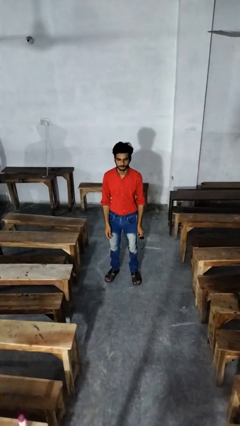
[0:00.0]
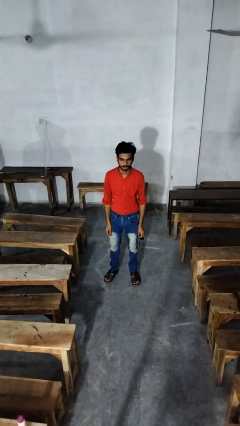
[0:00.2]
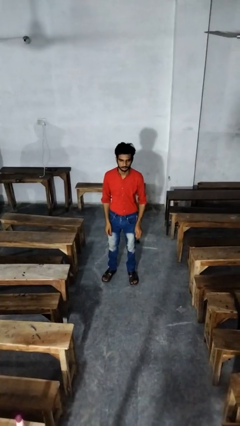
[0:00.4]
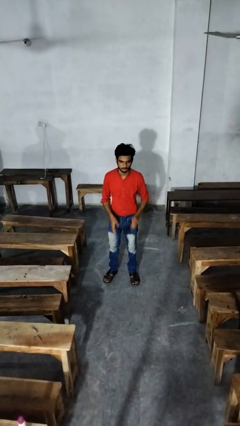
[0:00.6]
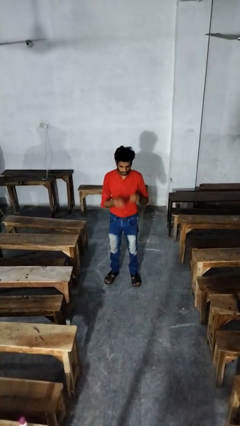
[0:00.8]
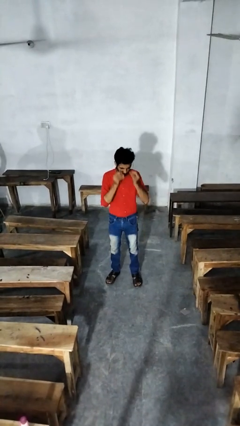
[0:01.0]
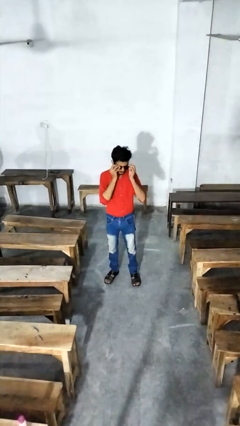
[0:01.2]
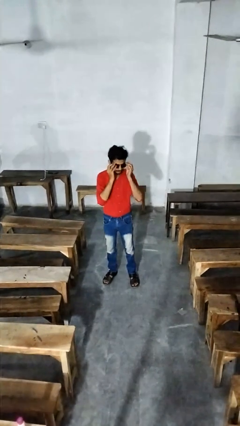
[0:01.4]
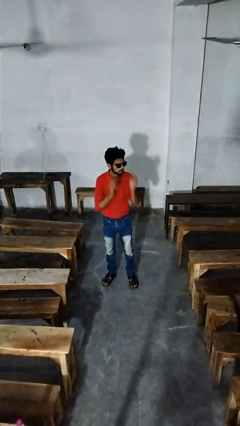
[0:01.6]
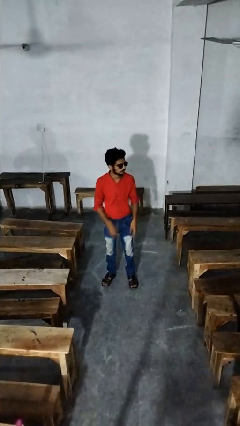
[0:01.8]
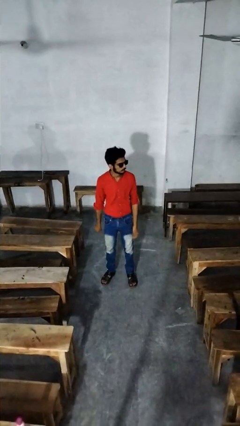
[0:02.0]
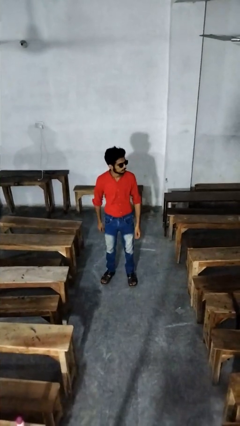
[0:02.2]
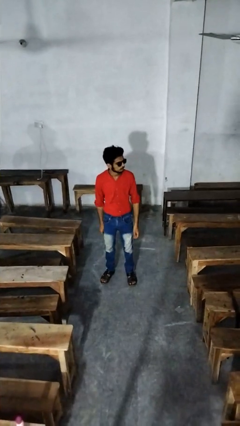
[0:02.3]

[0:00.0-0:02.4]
person puts on sunglasses

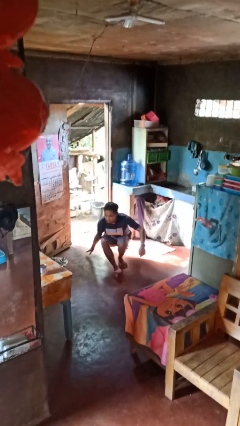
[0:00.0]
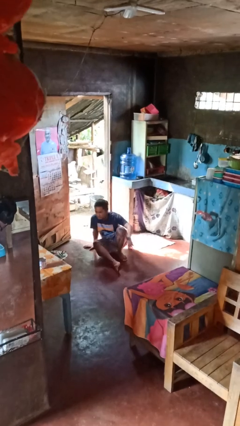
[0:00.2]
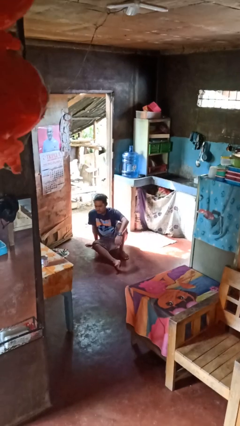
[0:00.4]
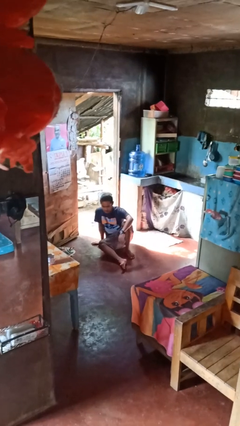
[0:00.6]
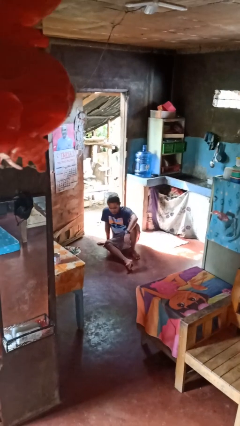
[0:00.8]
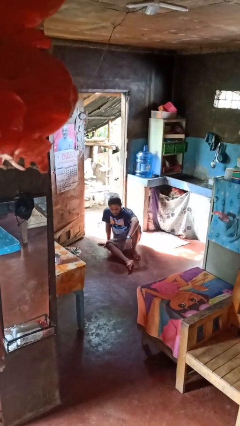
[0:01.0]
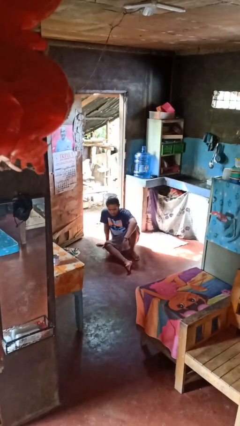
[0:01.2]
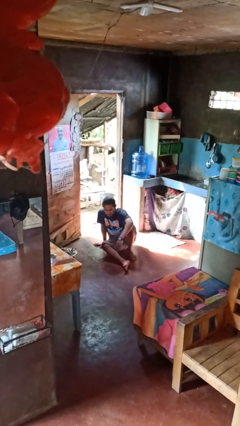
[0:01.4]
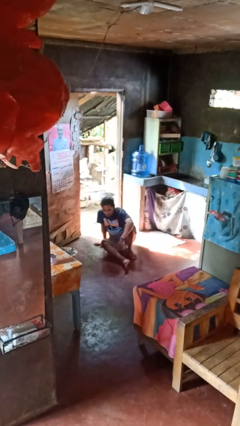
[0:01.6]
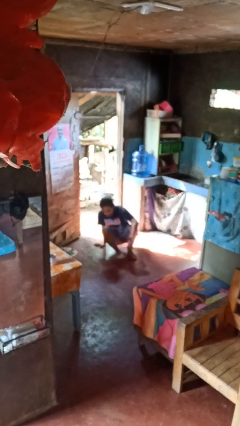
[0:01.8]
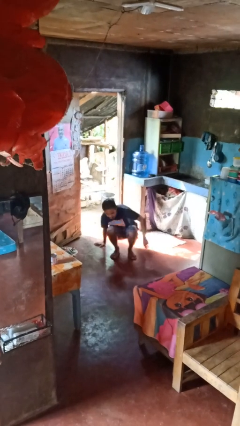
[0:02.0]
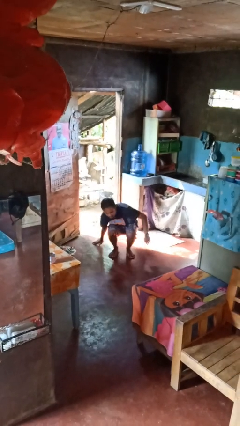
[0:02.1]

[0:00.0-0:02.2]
person falls while standing

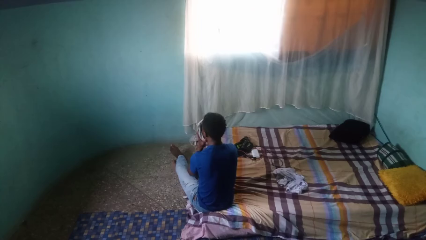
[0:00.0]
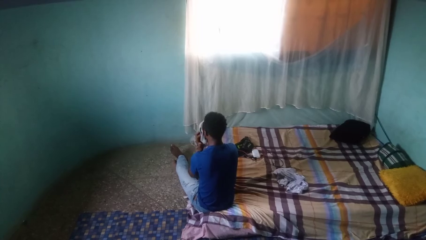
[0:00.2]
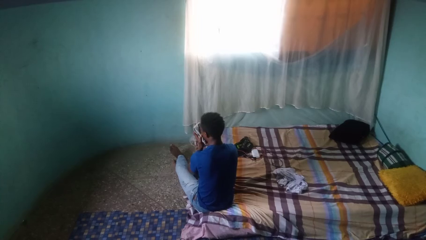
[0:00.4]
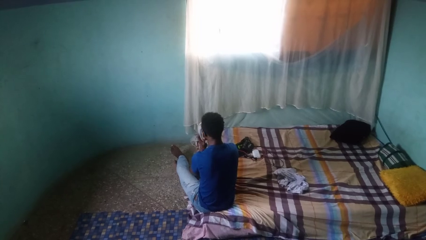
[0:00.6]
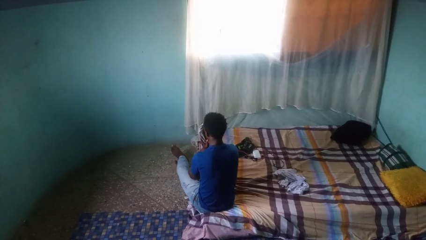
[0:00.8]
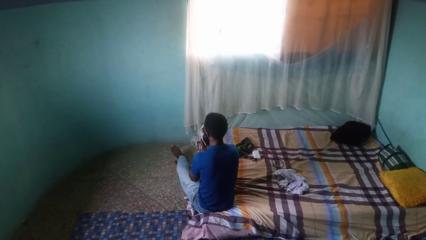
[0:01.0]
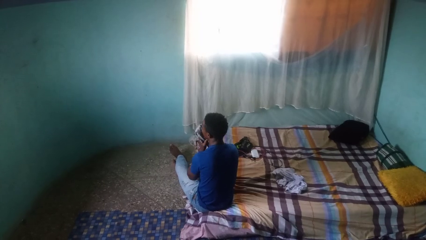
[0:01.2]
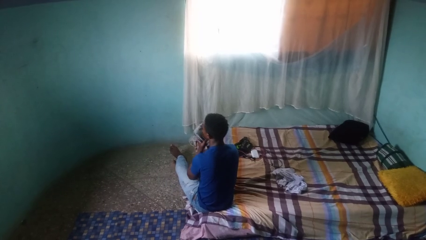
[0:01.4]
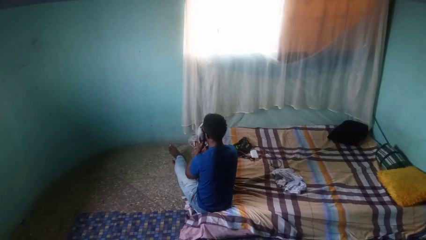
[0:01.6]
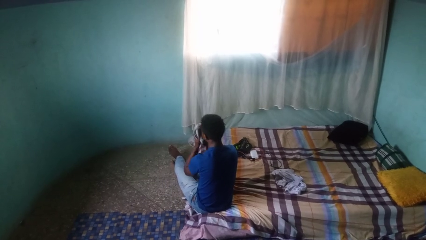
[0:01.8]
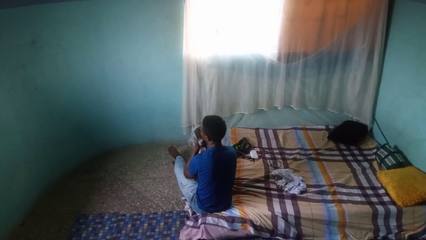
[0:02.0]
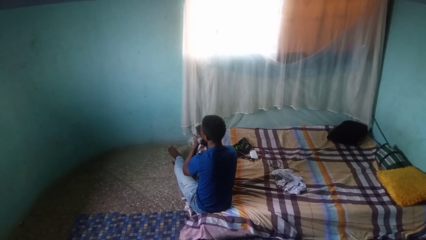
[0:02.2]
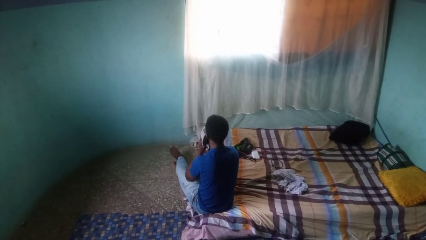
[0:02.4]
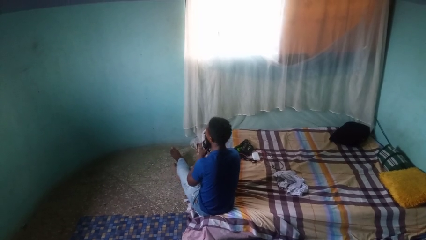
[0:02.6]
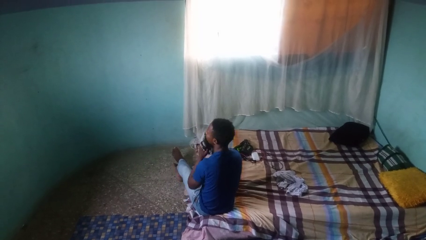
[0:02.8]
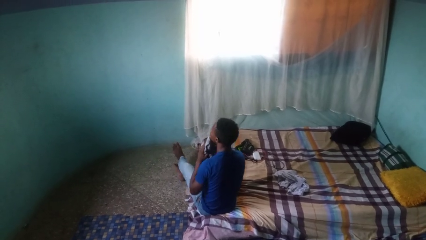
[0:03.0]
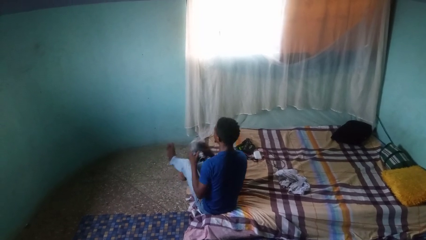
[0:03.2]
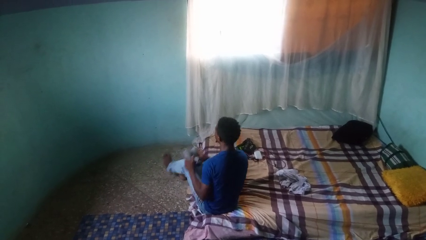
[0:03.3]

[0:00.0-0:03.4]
person wipes mouth with napkin

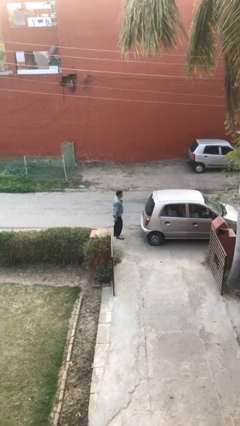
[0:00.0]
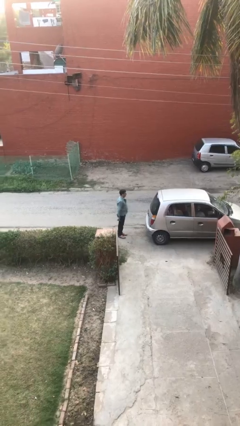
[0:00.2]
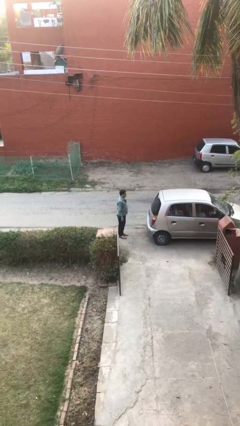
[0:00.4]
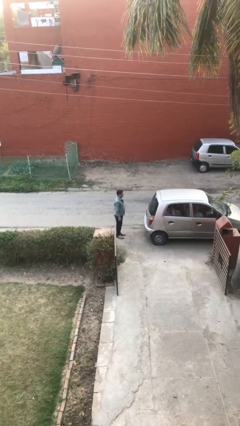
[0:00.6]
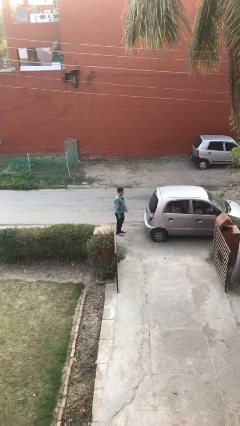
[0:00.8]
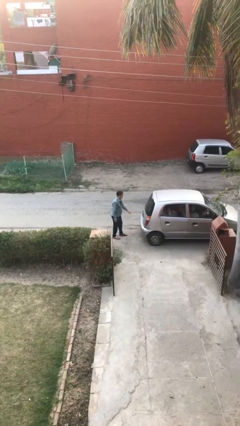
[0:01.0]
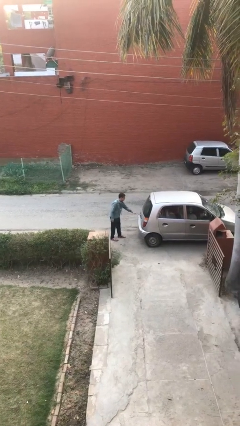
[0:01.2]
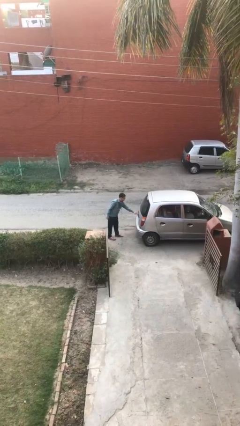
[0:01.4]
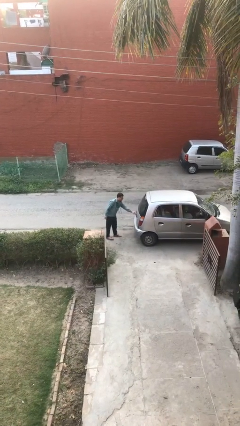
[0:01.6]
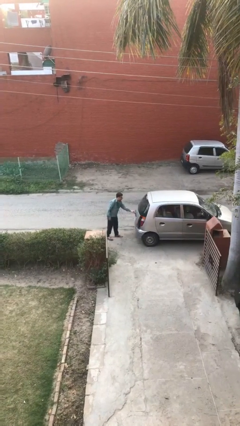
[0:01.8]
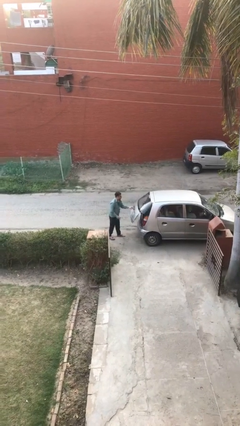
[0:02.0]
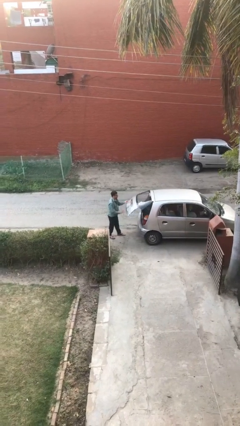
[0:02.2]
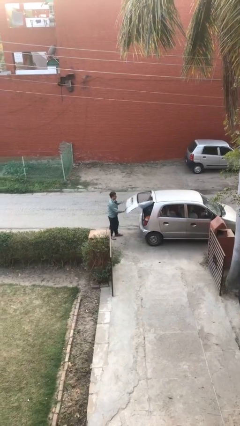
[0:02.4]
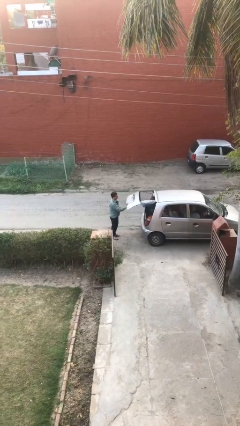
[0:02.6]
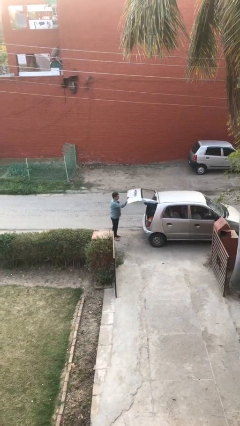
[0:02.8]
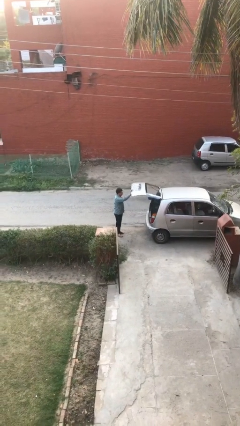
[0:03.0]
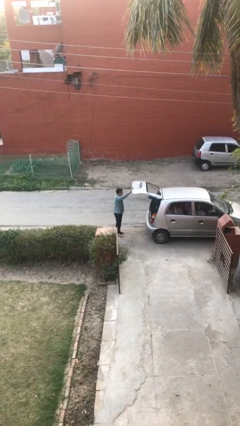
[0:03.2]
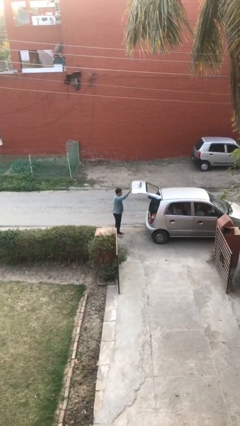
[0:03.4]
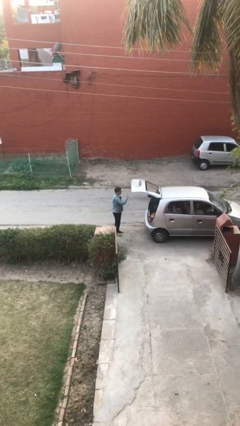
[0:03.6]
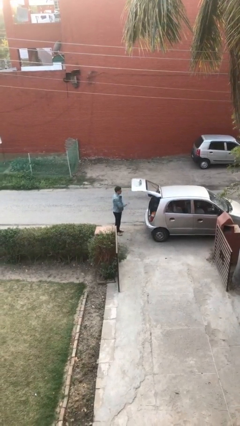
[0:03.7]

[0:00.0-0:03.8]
person opens car trunk

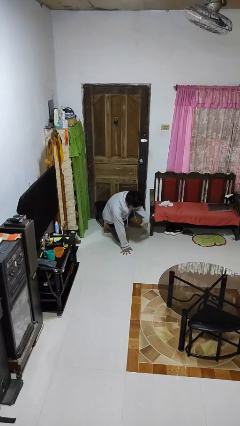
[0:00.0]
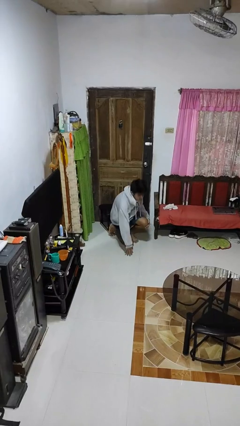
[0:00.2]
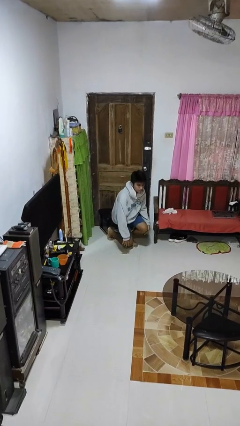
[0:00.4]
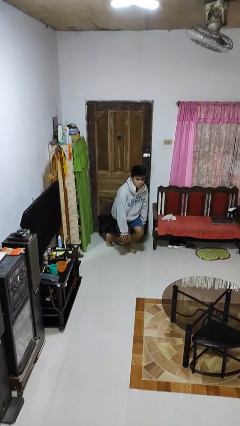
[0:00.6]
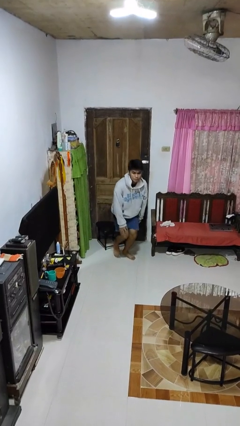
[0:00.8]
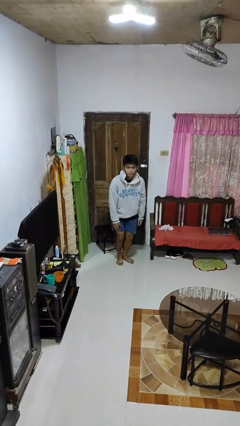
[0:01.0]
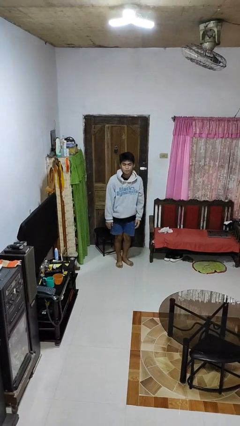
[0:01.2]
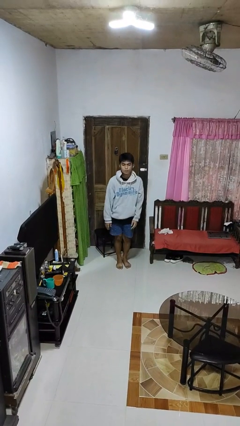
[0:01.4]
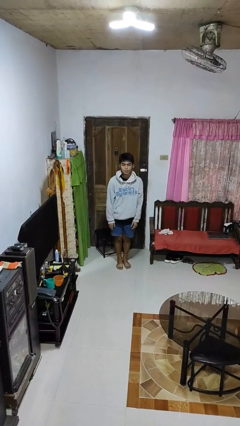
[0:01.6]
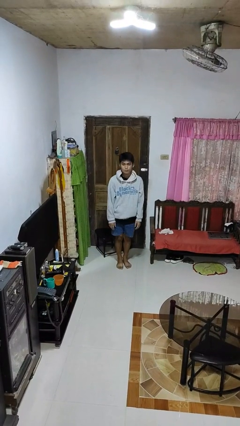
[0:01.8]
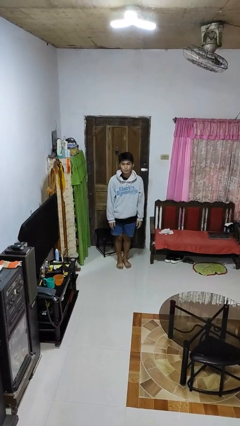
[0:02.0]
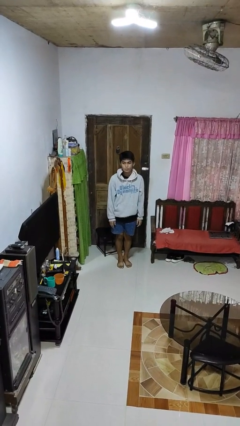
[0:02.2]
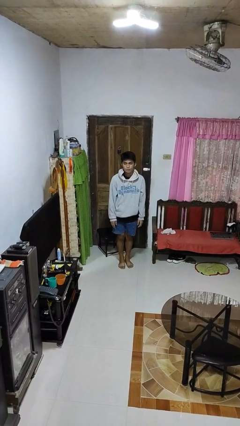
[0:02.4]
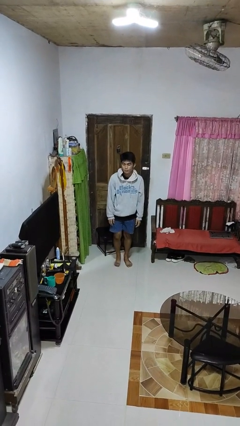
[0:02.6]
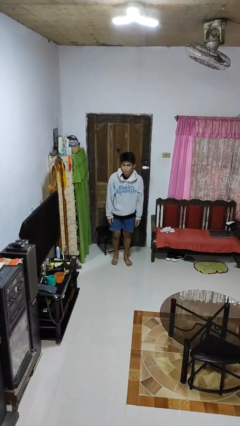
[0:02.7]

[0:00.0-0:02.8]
person stands up from floor

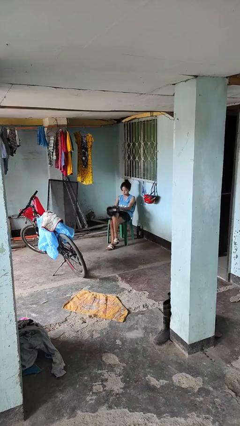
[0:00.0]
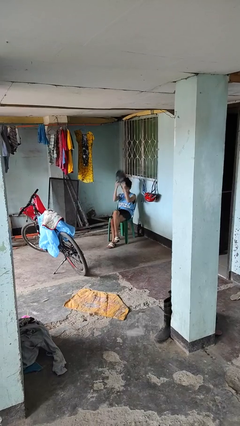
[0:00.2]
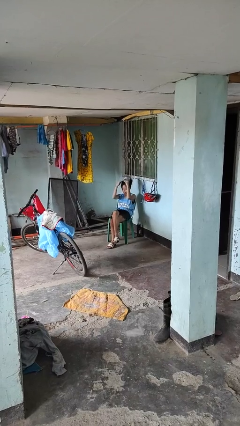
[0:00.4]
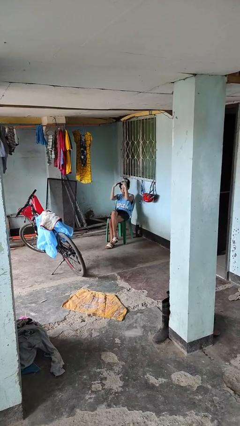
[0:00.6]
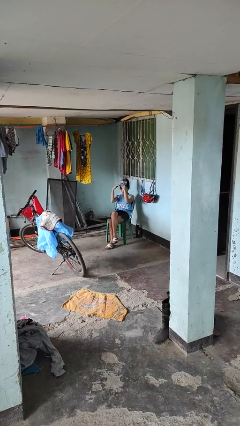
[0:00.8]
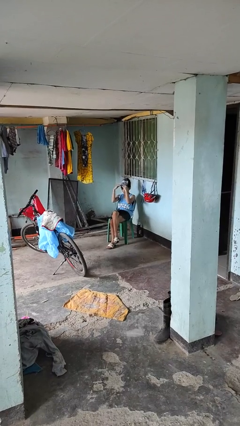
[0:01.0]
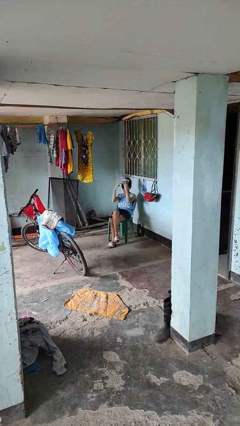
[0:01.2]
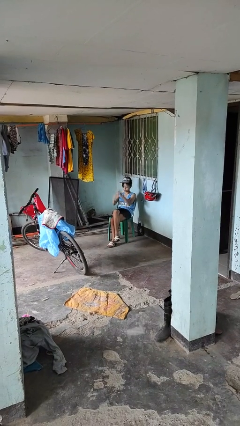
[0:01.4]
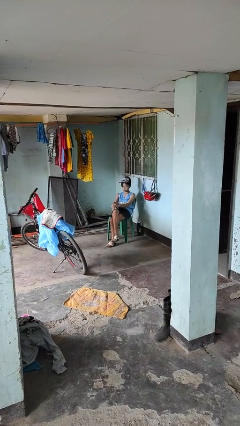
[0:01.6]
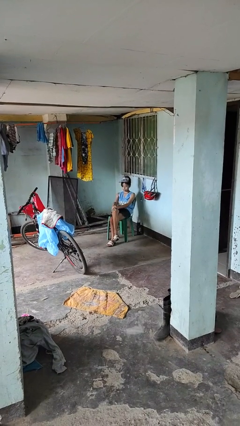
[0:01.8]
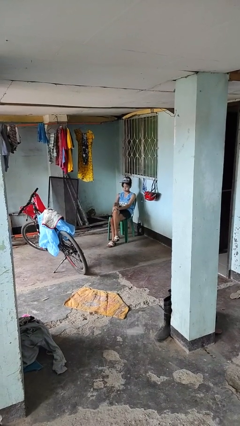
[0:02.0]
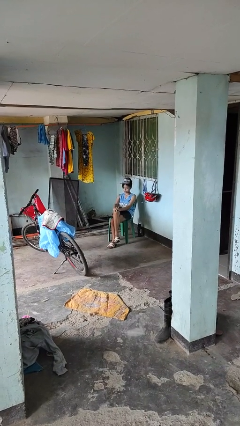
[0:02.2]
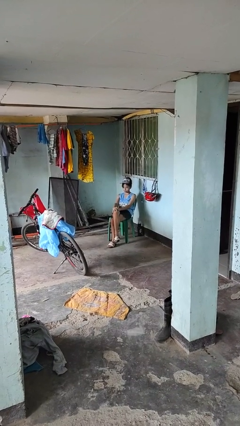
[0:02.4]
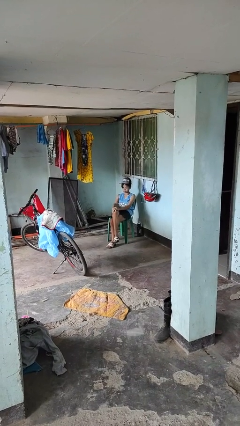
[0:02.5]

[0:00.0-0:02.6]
person puts on hat
